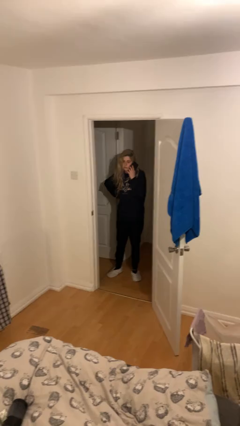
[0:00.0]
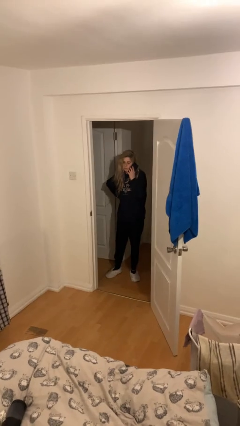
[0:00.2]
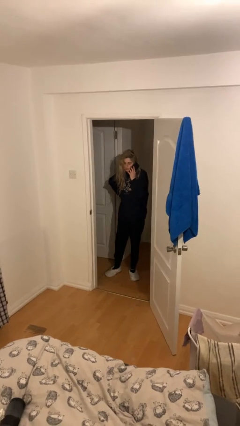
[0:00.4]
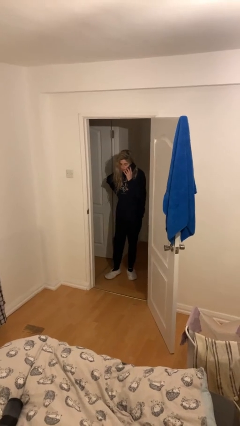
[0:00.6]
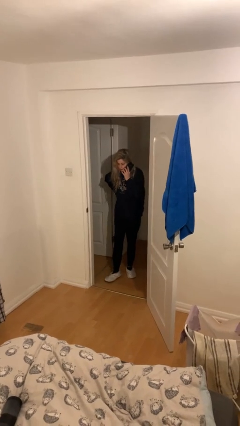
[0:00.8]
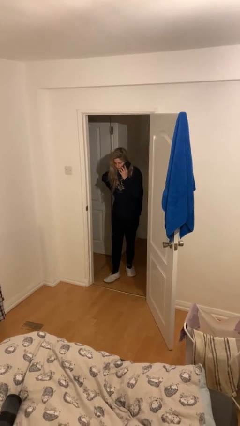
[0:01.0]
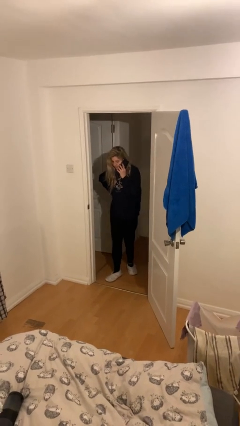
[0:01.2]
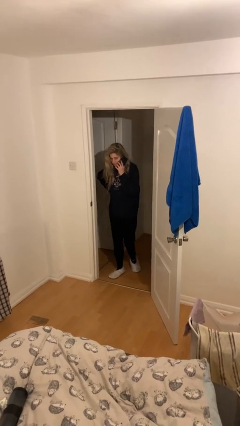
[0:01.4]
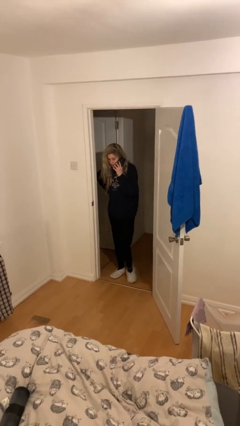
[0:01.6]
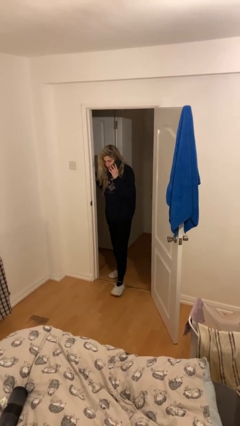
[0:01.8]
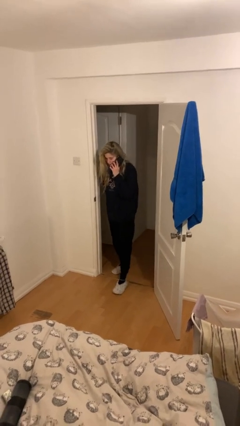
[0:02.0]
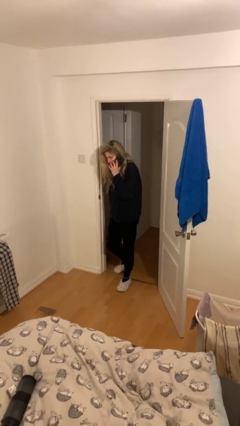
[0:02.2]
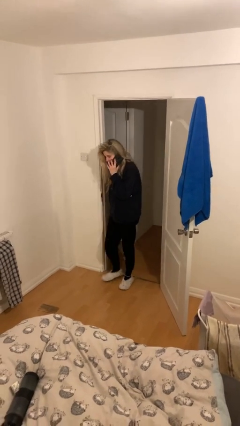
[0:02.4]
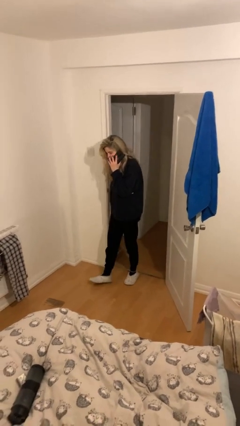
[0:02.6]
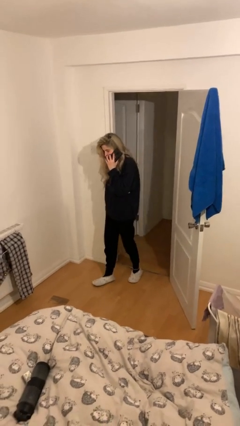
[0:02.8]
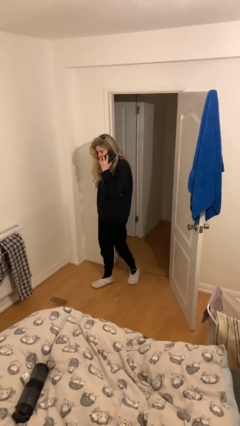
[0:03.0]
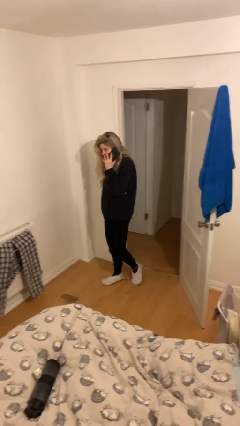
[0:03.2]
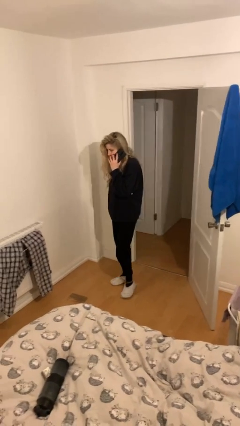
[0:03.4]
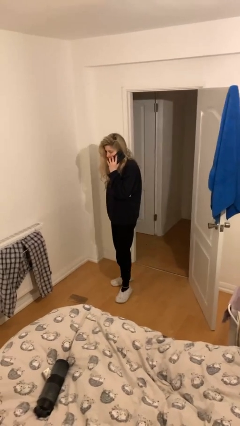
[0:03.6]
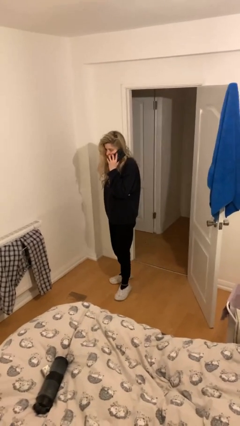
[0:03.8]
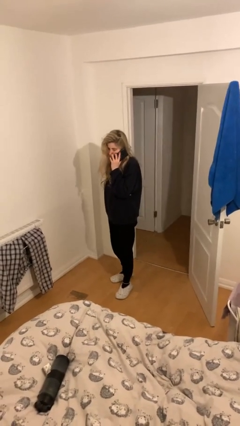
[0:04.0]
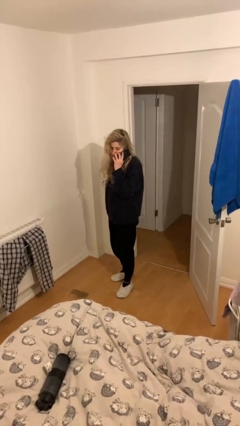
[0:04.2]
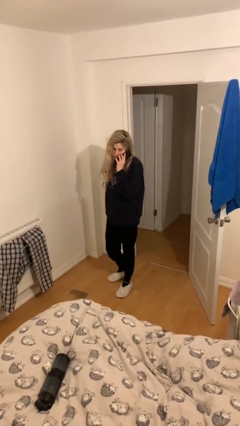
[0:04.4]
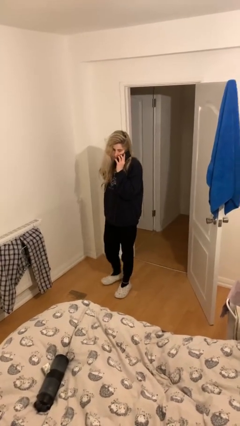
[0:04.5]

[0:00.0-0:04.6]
person enters scene through structure

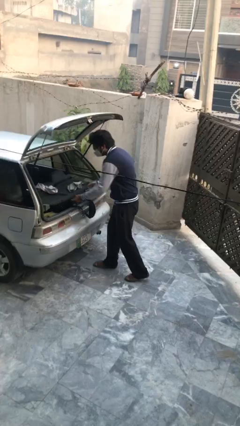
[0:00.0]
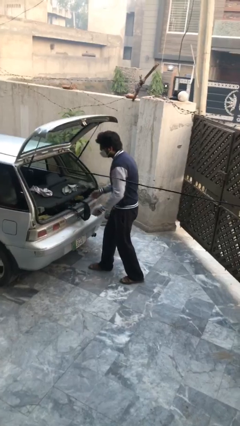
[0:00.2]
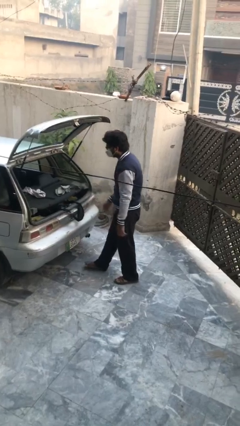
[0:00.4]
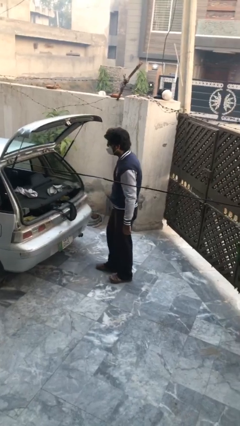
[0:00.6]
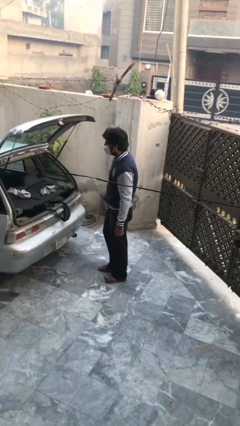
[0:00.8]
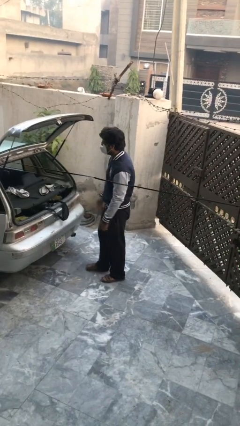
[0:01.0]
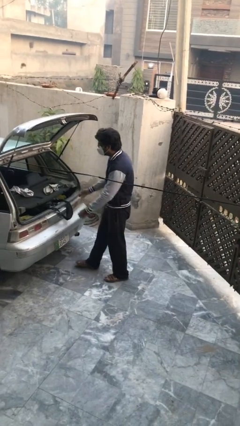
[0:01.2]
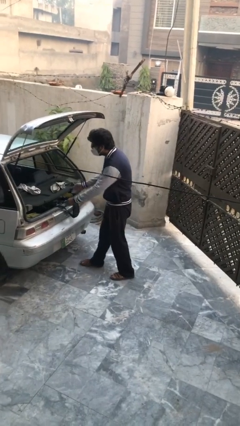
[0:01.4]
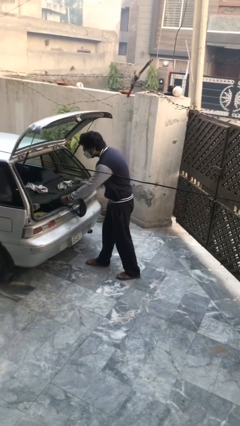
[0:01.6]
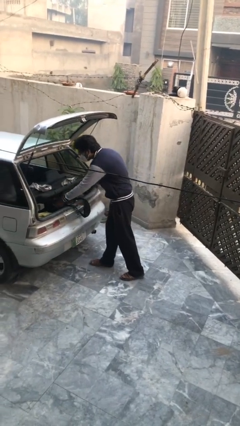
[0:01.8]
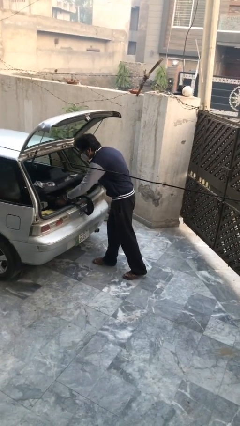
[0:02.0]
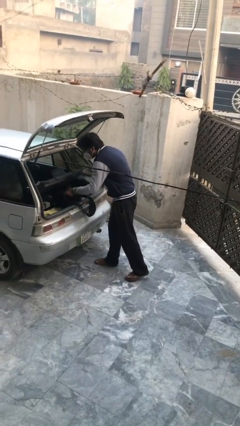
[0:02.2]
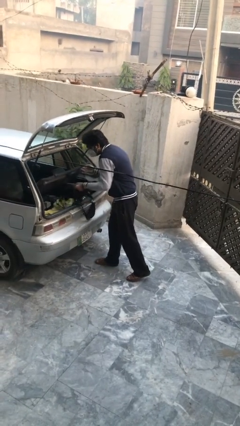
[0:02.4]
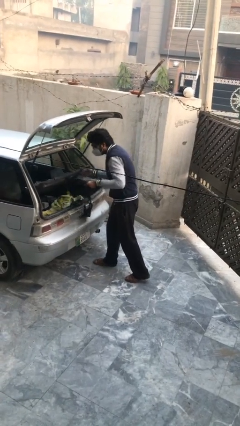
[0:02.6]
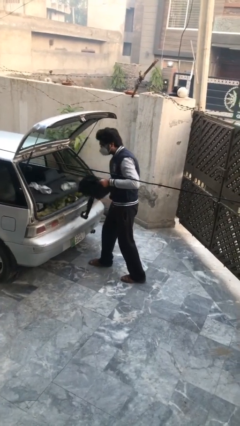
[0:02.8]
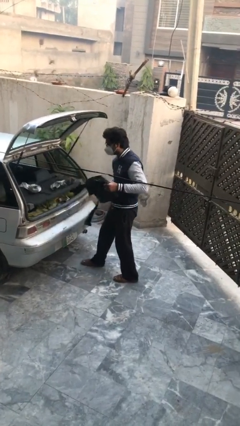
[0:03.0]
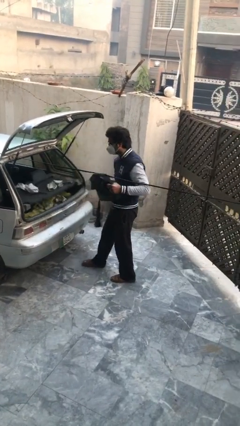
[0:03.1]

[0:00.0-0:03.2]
person unloads car

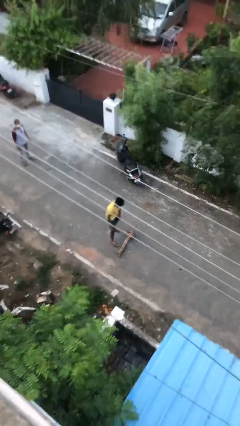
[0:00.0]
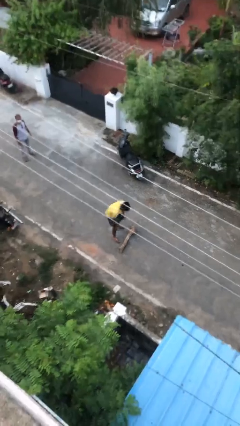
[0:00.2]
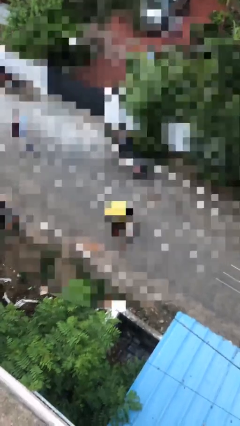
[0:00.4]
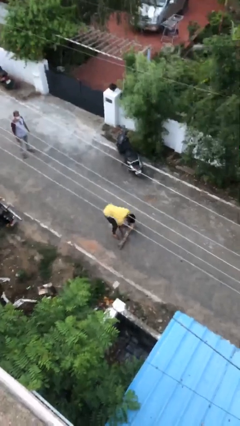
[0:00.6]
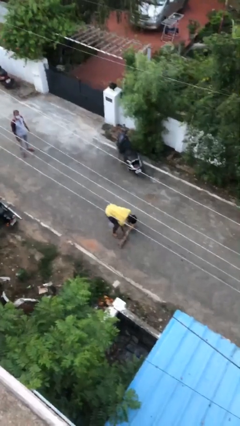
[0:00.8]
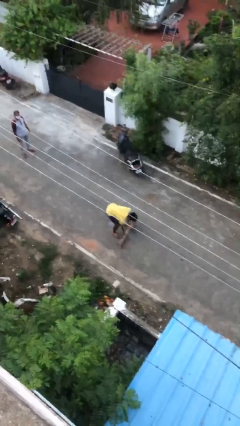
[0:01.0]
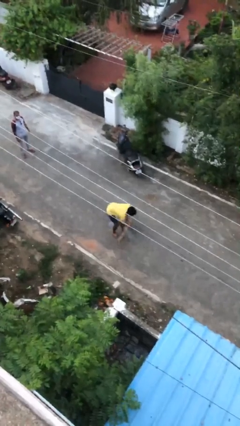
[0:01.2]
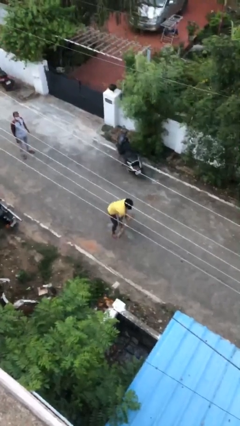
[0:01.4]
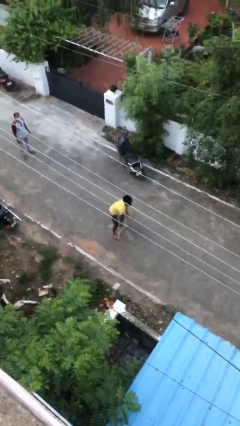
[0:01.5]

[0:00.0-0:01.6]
person picks up object from floor

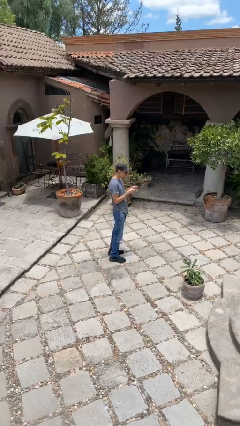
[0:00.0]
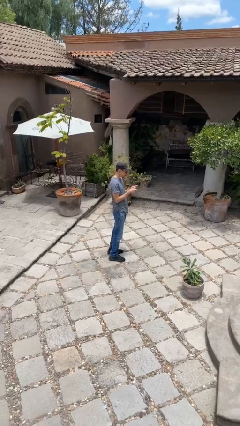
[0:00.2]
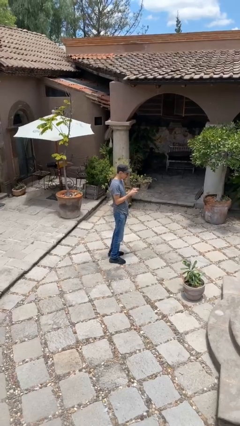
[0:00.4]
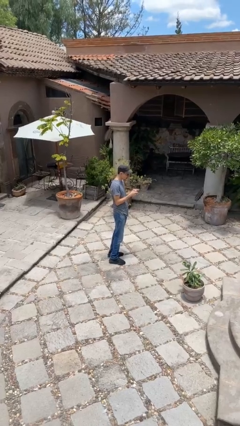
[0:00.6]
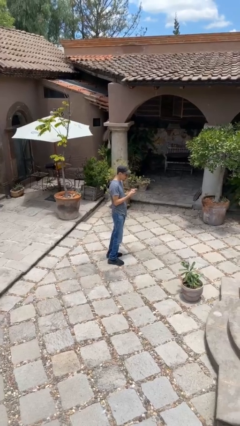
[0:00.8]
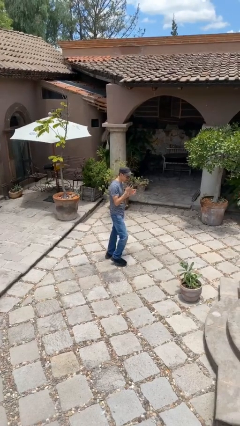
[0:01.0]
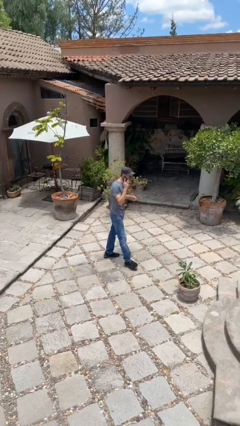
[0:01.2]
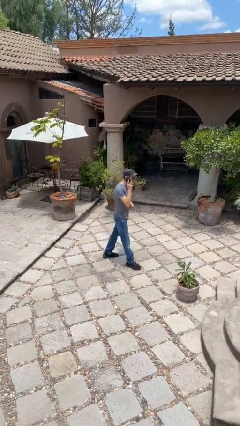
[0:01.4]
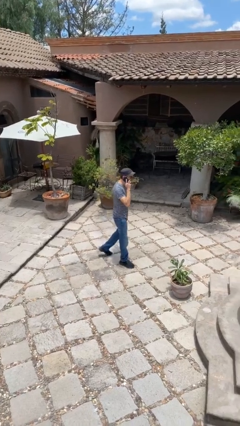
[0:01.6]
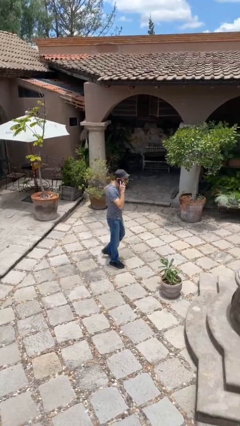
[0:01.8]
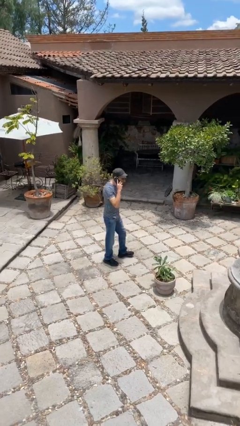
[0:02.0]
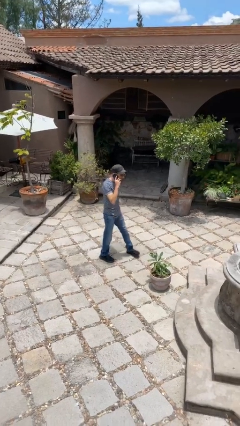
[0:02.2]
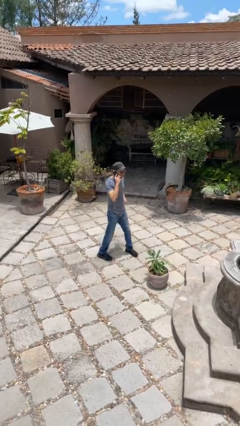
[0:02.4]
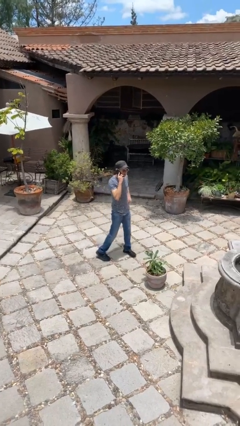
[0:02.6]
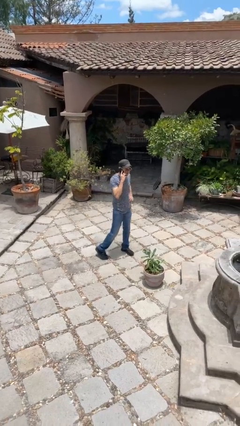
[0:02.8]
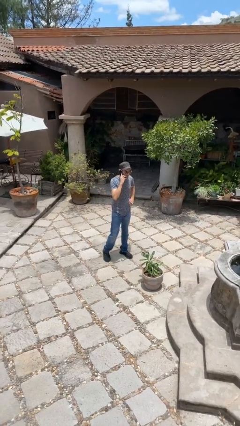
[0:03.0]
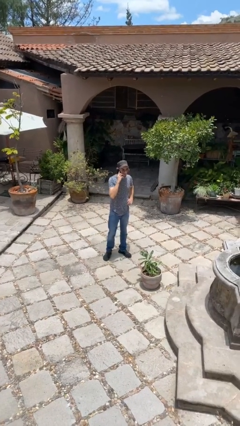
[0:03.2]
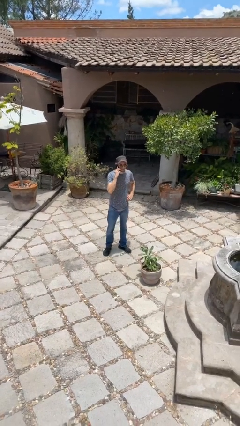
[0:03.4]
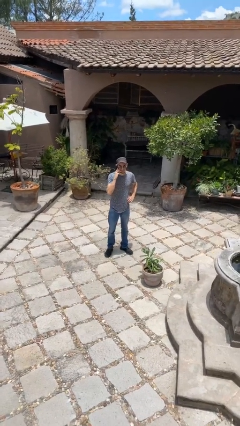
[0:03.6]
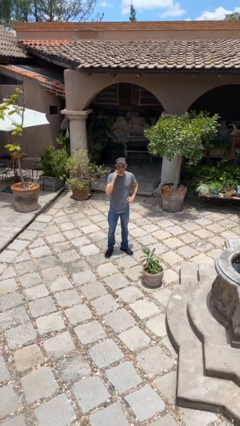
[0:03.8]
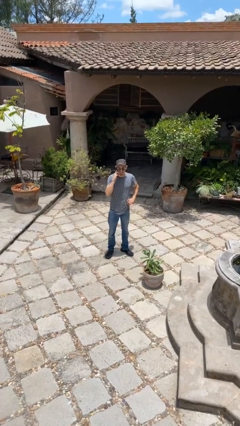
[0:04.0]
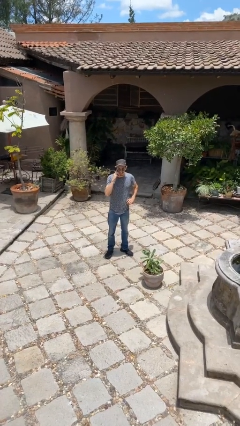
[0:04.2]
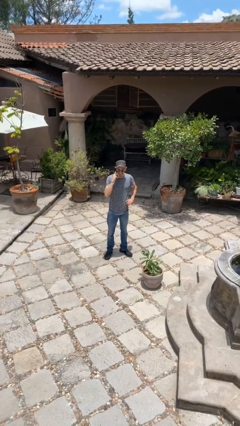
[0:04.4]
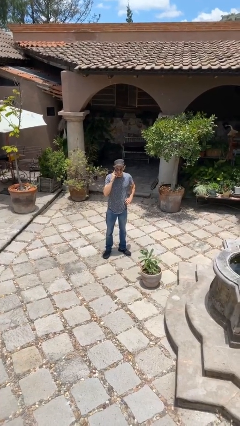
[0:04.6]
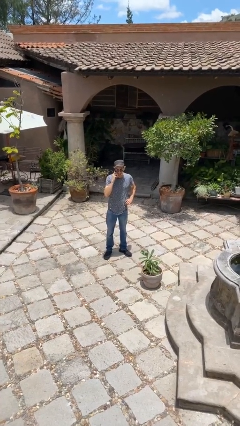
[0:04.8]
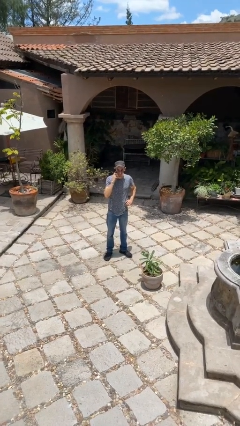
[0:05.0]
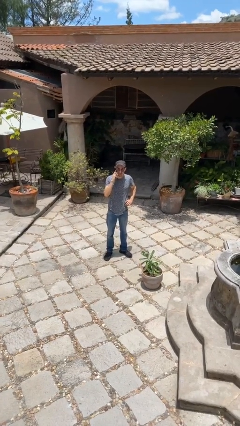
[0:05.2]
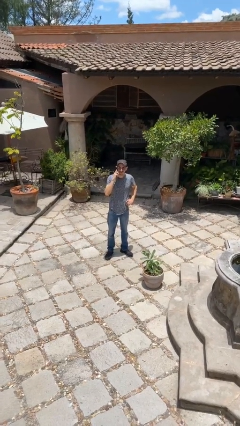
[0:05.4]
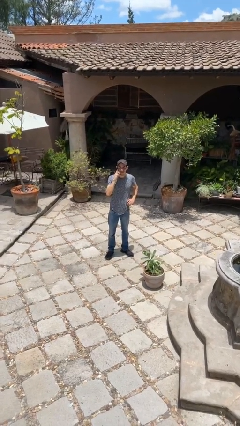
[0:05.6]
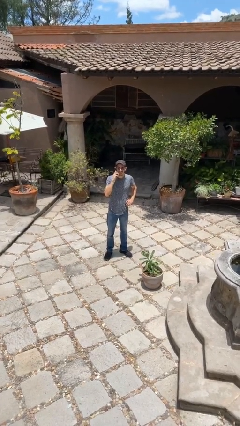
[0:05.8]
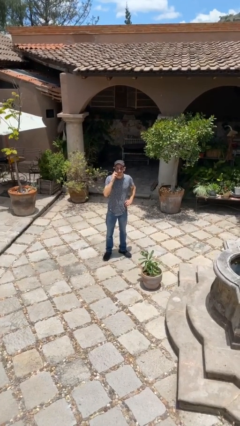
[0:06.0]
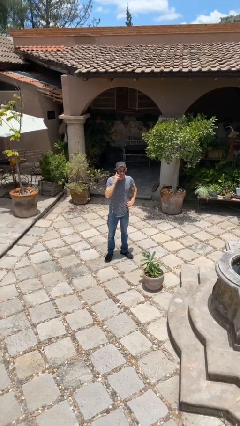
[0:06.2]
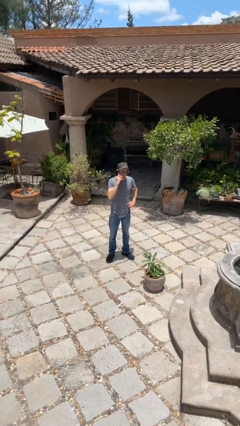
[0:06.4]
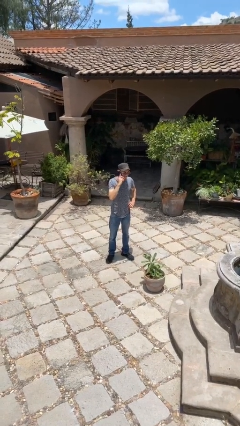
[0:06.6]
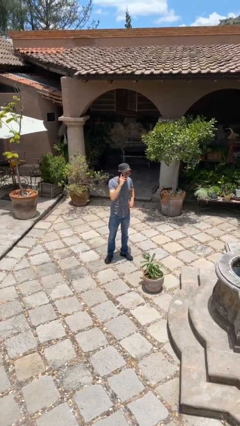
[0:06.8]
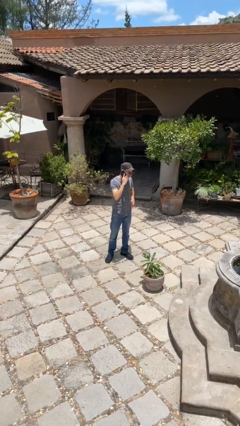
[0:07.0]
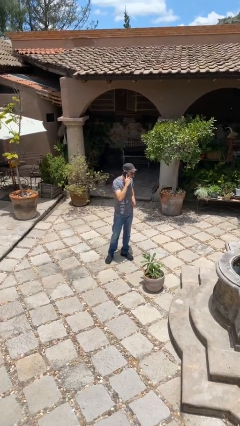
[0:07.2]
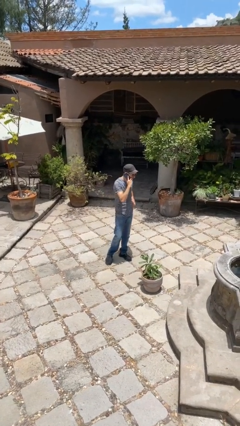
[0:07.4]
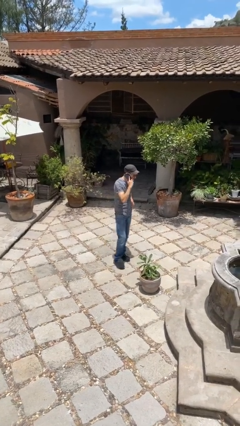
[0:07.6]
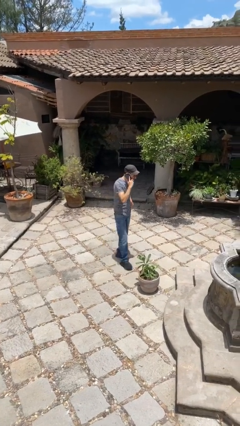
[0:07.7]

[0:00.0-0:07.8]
person talks on phone
